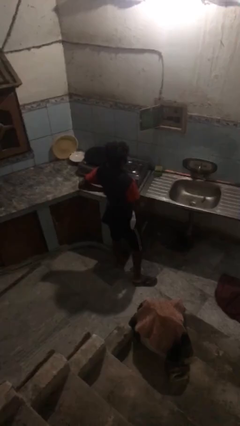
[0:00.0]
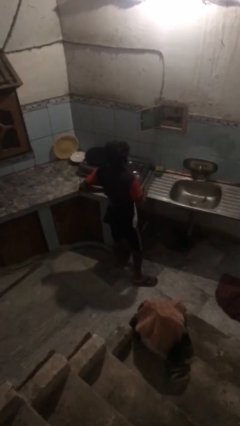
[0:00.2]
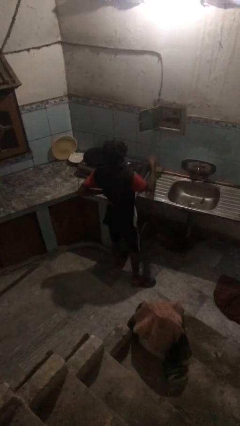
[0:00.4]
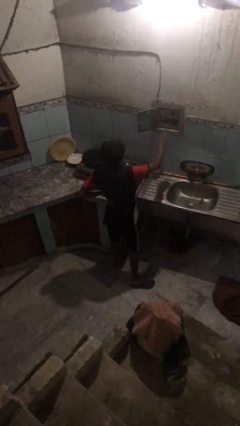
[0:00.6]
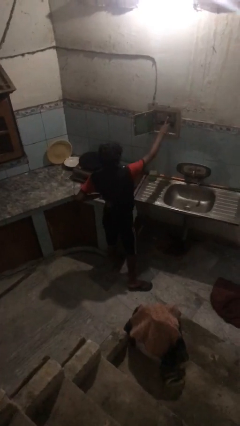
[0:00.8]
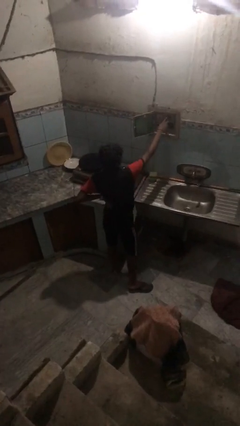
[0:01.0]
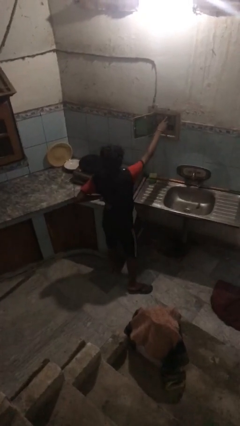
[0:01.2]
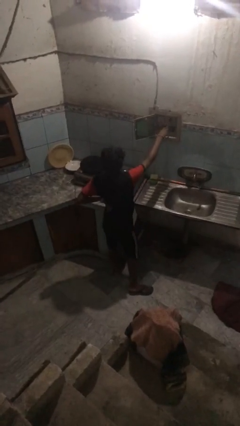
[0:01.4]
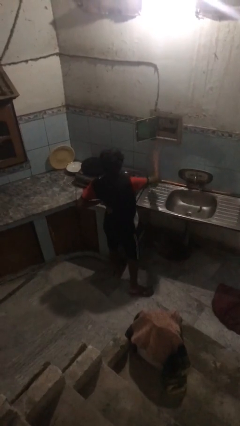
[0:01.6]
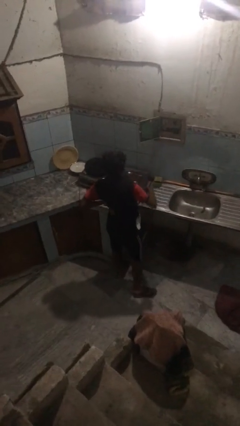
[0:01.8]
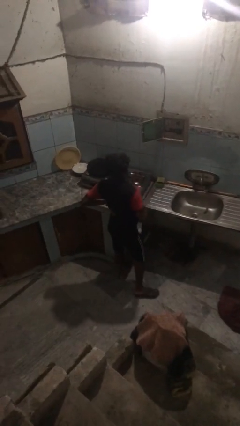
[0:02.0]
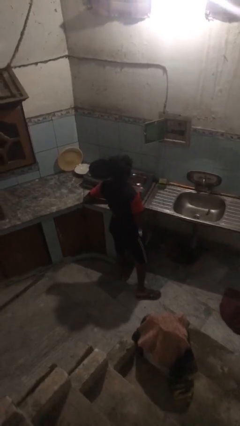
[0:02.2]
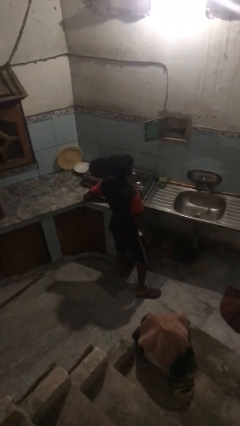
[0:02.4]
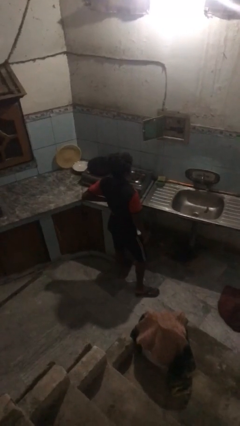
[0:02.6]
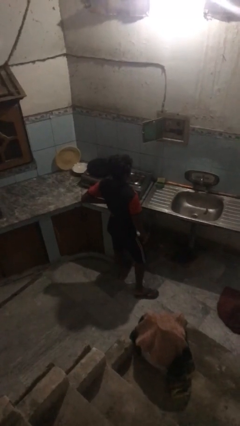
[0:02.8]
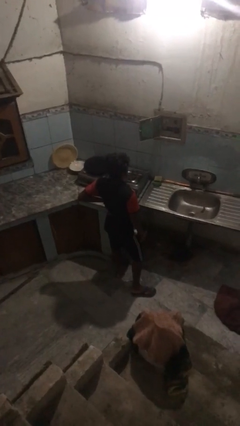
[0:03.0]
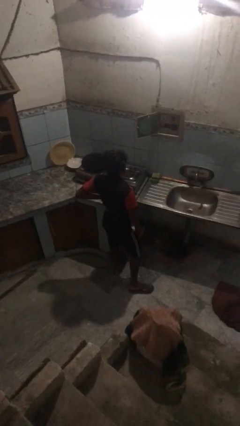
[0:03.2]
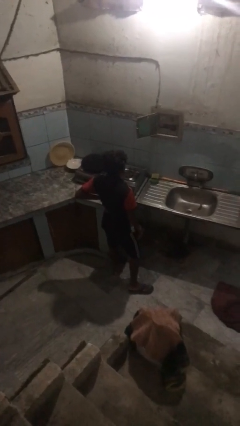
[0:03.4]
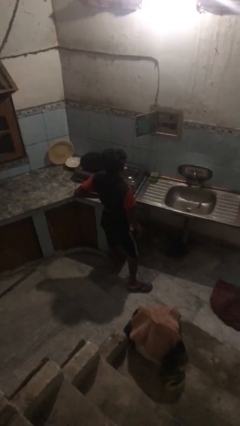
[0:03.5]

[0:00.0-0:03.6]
person puts up smoke detector

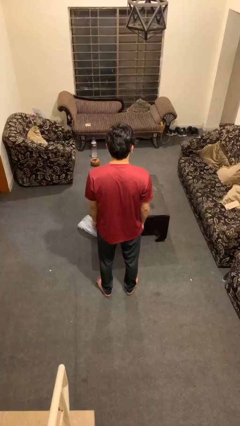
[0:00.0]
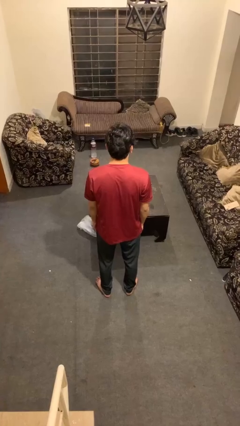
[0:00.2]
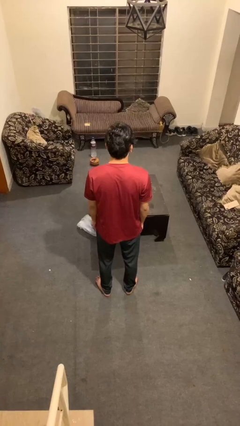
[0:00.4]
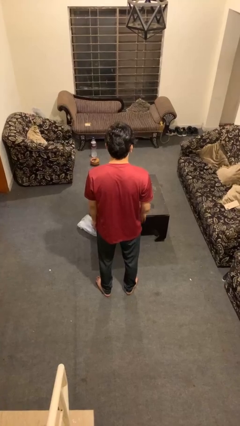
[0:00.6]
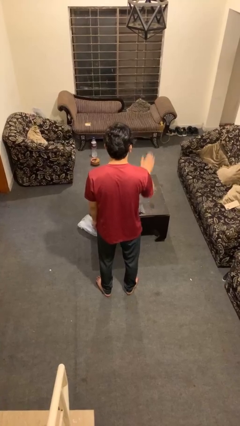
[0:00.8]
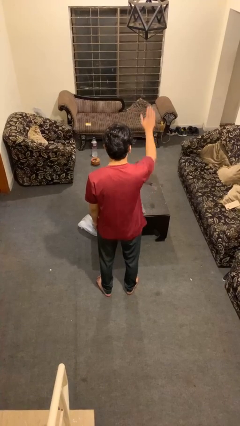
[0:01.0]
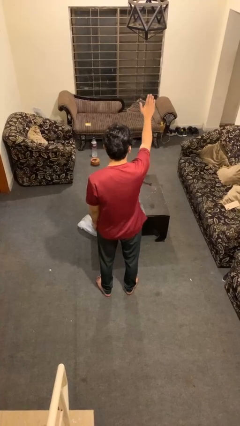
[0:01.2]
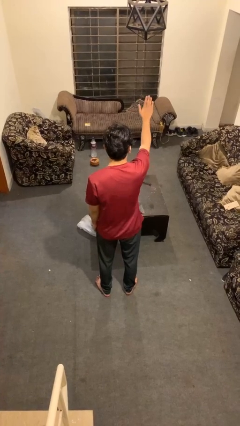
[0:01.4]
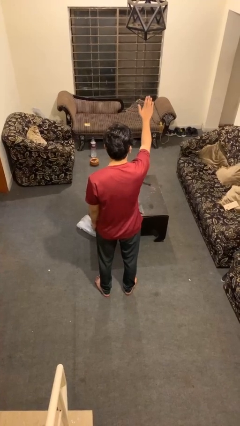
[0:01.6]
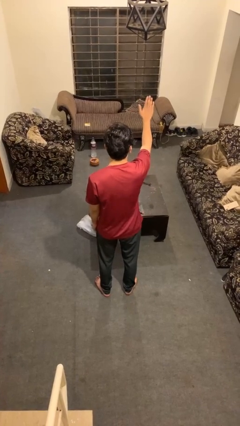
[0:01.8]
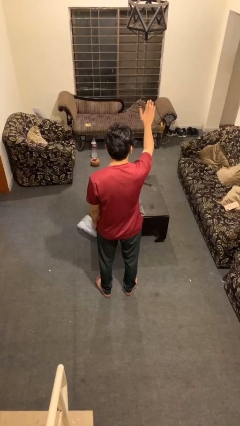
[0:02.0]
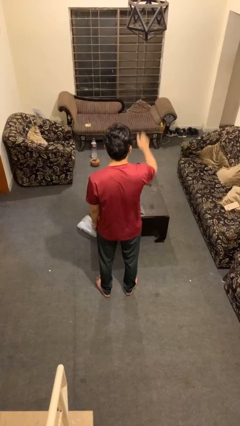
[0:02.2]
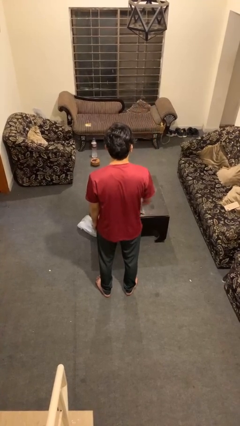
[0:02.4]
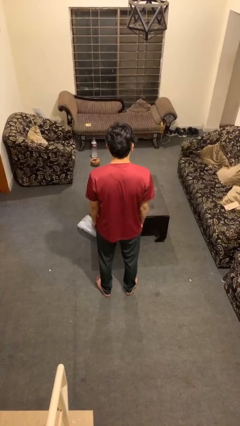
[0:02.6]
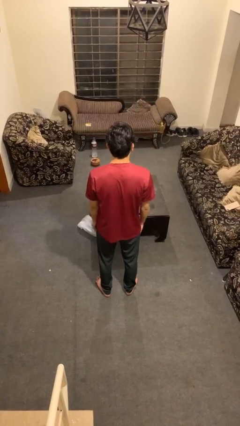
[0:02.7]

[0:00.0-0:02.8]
person gestures stop

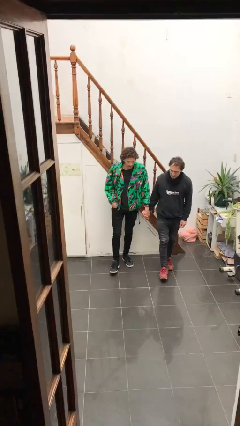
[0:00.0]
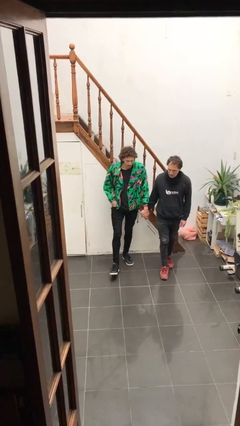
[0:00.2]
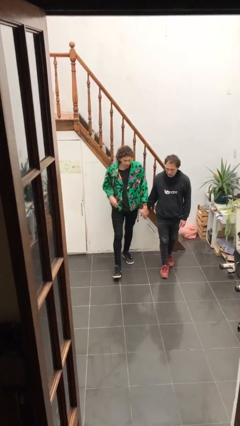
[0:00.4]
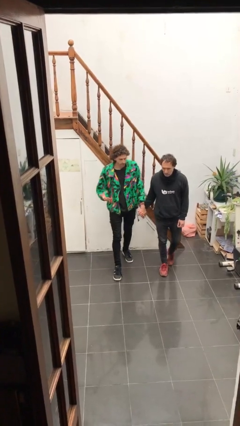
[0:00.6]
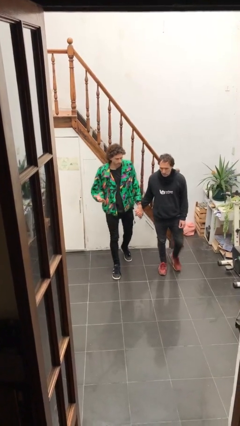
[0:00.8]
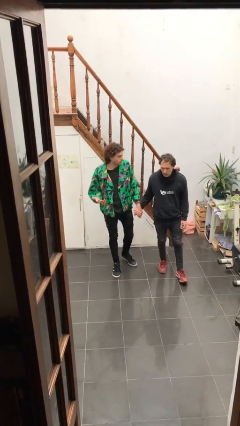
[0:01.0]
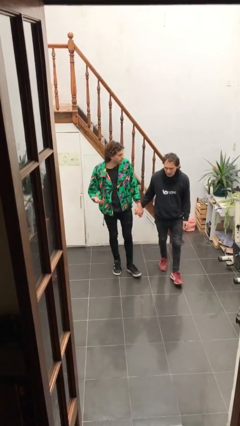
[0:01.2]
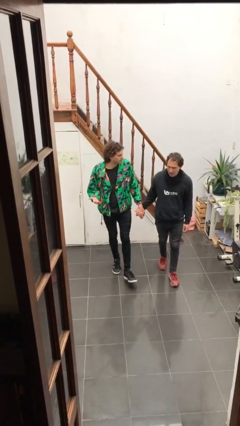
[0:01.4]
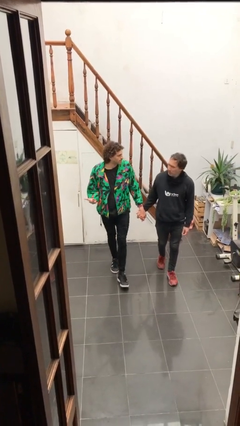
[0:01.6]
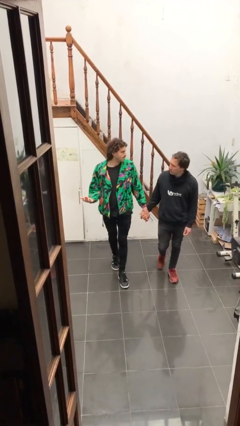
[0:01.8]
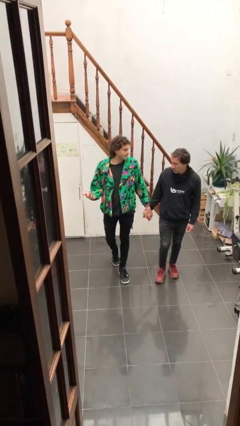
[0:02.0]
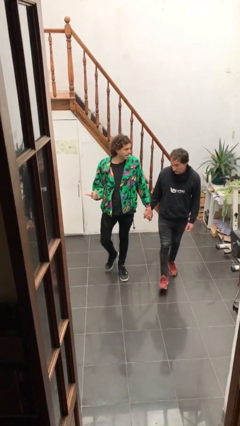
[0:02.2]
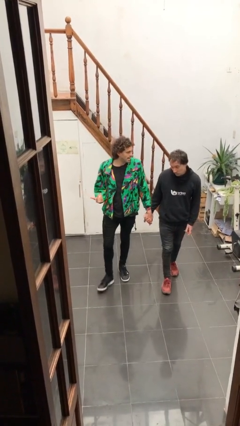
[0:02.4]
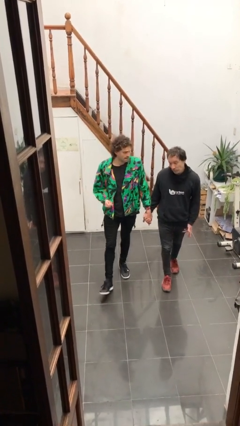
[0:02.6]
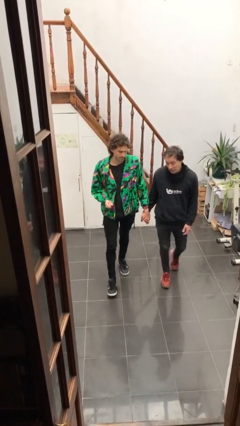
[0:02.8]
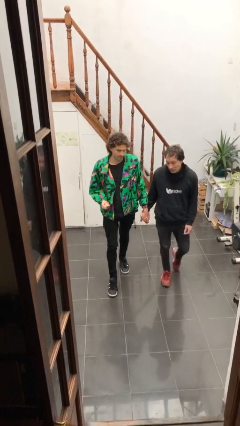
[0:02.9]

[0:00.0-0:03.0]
person holds hand

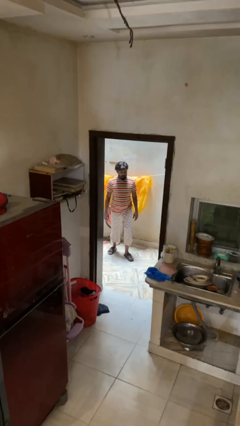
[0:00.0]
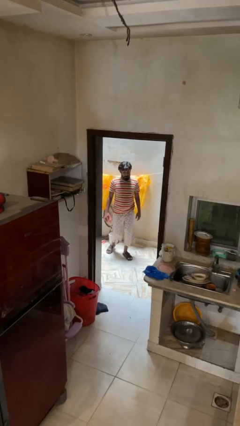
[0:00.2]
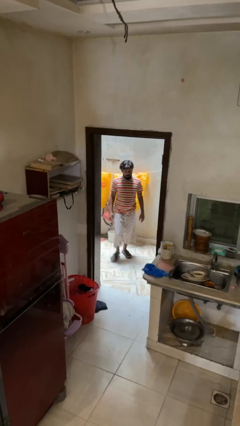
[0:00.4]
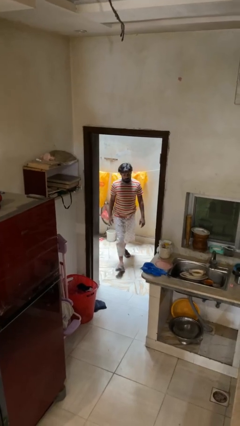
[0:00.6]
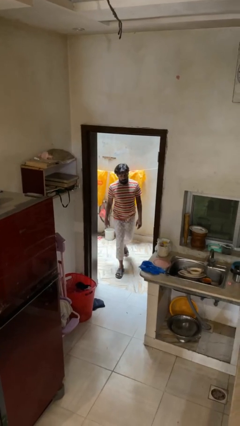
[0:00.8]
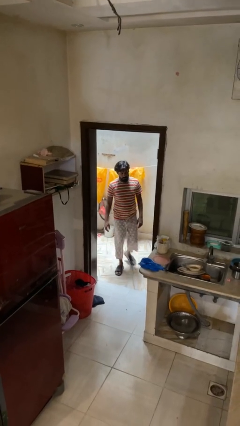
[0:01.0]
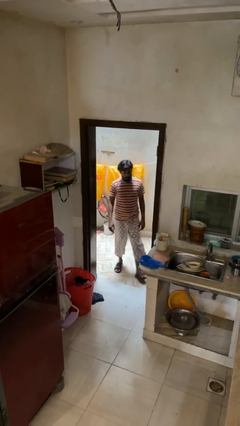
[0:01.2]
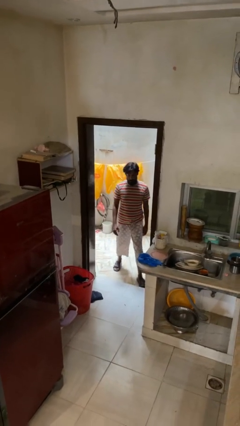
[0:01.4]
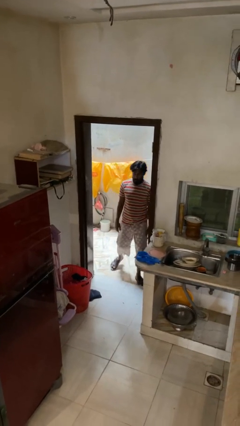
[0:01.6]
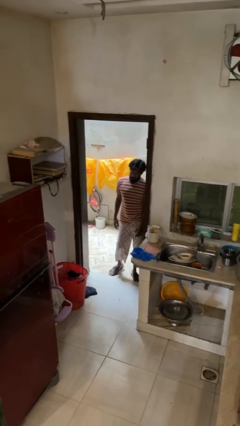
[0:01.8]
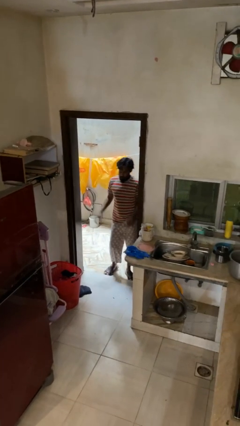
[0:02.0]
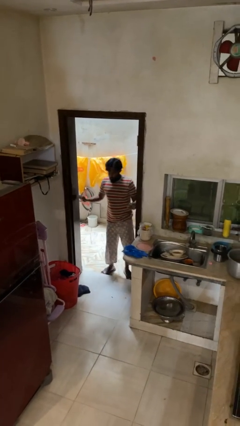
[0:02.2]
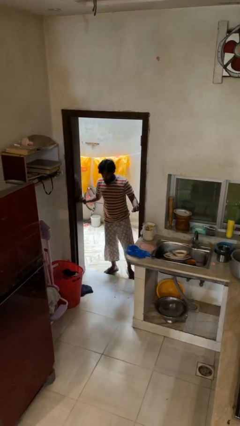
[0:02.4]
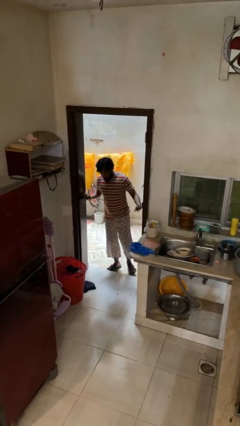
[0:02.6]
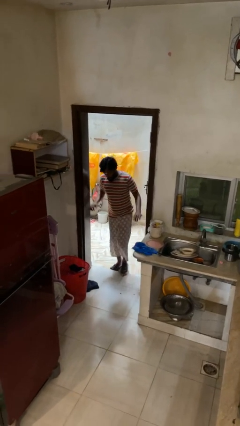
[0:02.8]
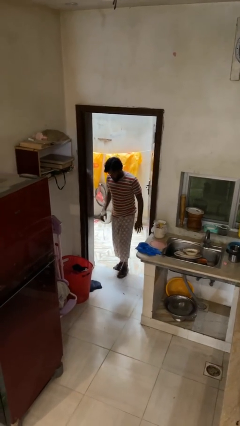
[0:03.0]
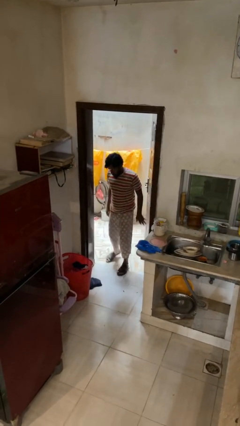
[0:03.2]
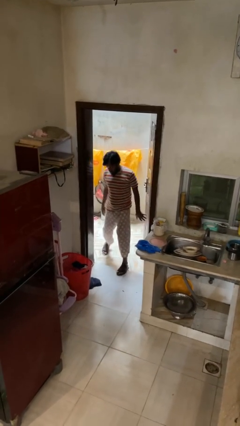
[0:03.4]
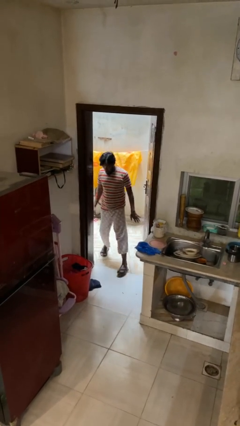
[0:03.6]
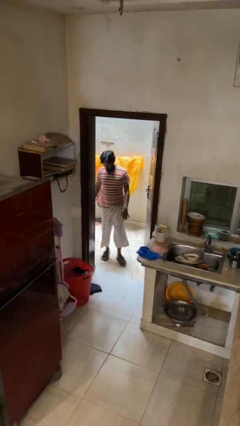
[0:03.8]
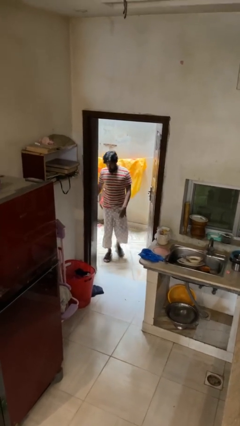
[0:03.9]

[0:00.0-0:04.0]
person bumps into wall

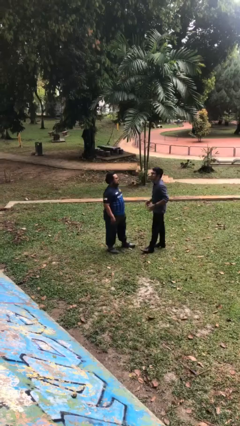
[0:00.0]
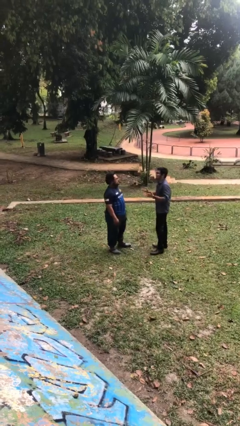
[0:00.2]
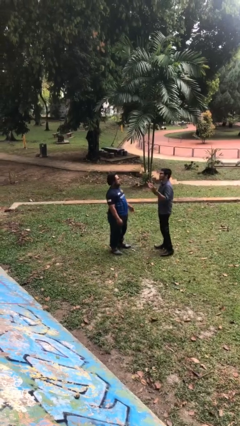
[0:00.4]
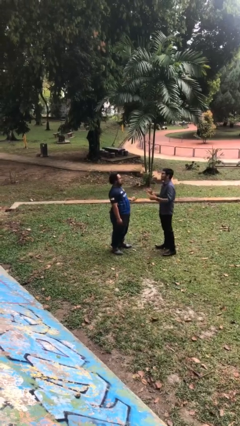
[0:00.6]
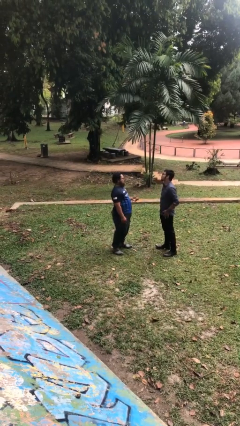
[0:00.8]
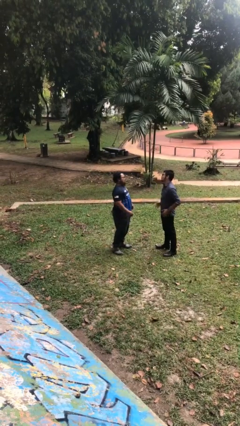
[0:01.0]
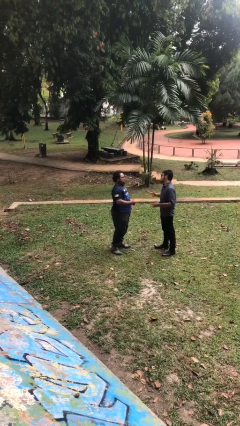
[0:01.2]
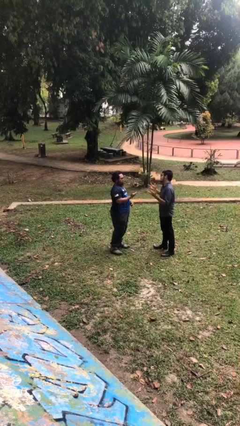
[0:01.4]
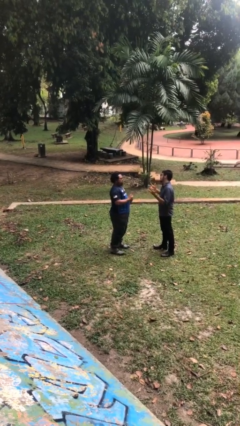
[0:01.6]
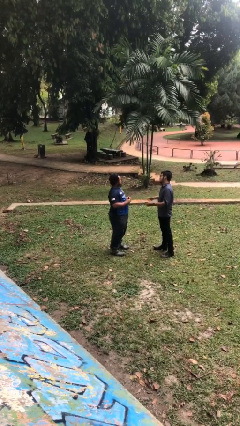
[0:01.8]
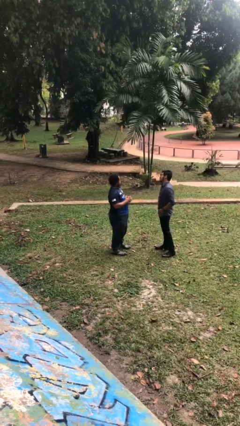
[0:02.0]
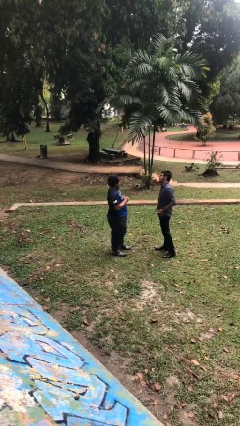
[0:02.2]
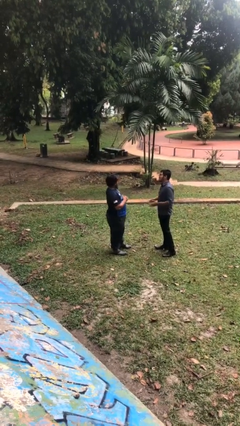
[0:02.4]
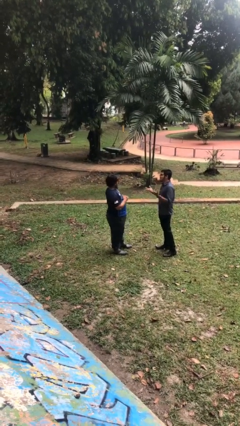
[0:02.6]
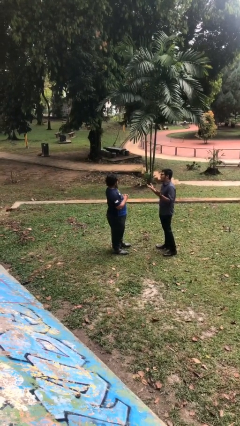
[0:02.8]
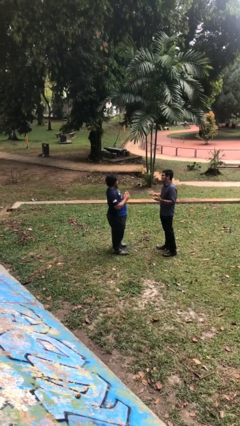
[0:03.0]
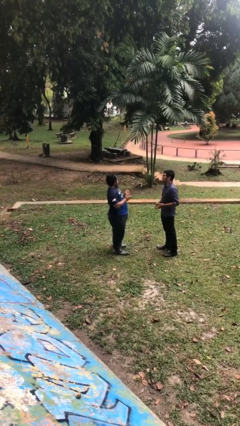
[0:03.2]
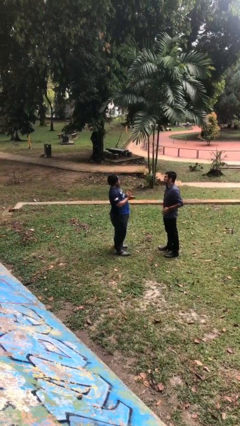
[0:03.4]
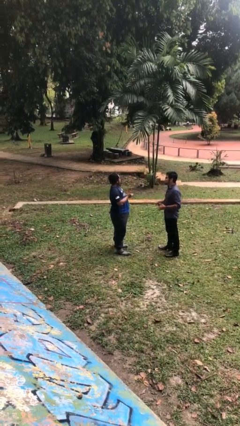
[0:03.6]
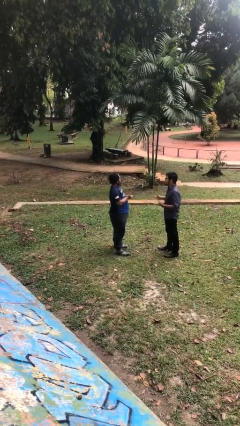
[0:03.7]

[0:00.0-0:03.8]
person talks to person
